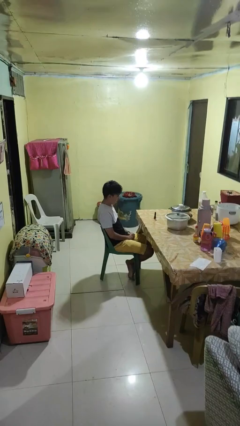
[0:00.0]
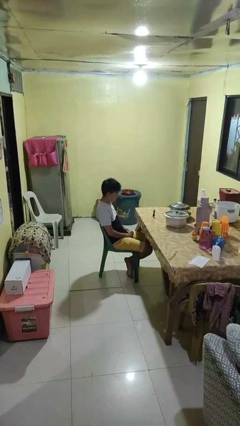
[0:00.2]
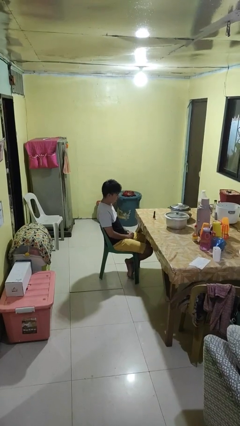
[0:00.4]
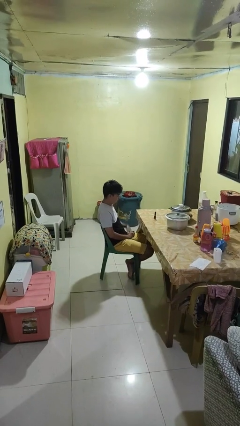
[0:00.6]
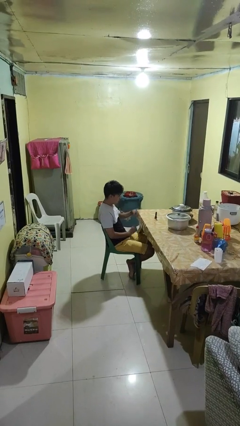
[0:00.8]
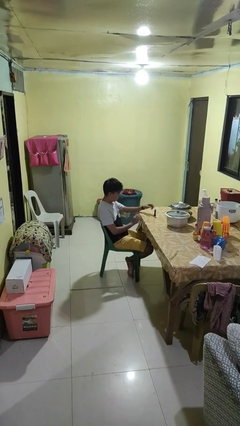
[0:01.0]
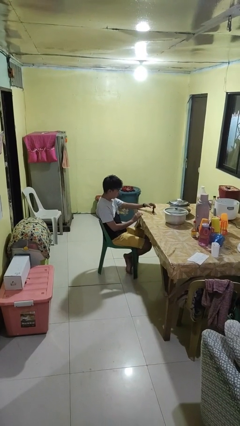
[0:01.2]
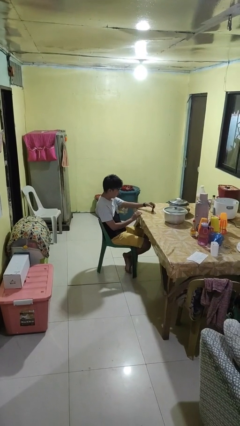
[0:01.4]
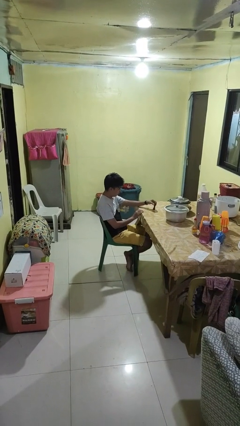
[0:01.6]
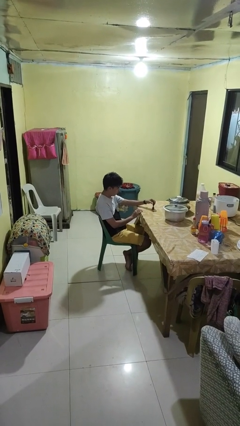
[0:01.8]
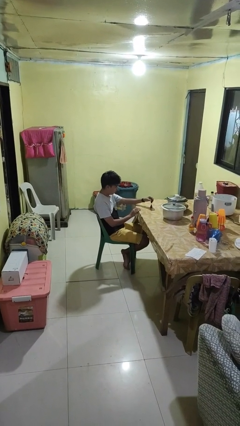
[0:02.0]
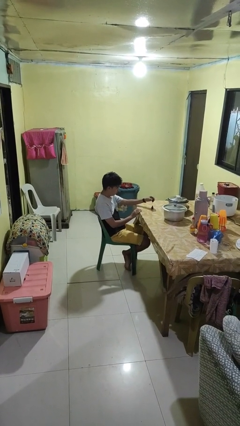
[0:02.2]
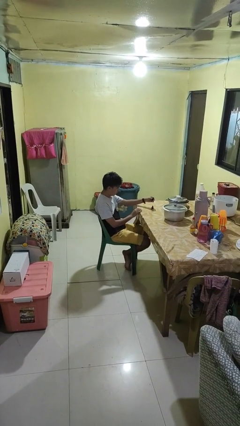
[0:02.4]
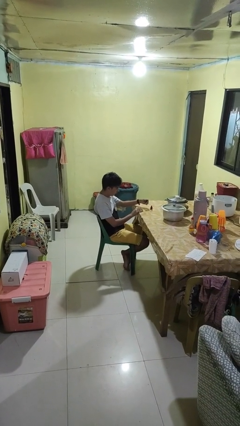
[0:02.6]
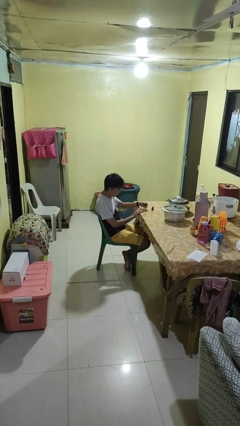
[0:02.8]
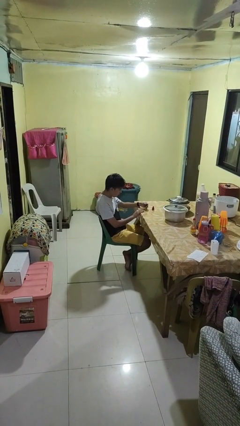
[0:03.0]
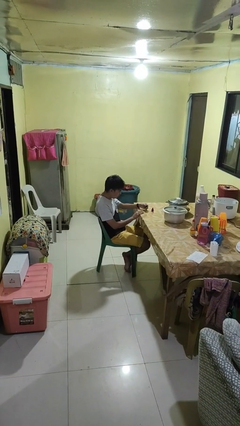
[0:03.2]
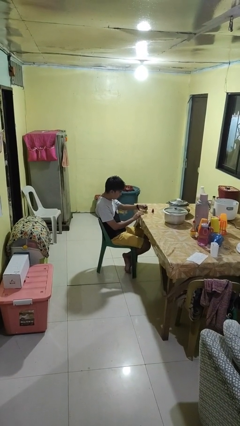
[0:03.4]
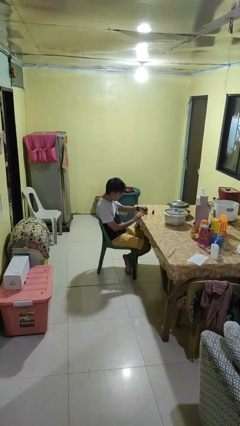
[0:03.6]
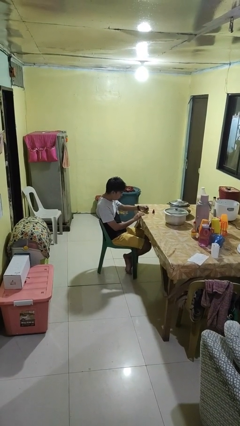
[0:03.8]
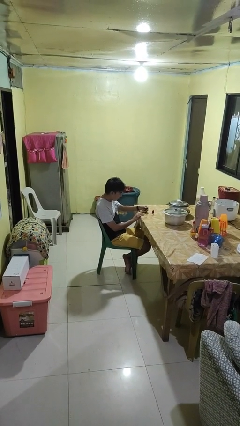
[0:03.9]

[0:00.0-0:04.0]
person paints fingernails

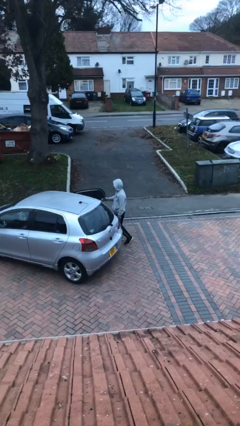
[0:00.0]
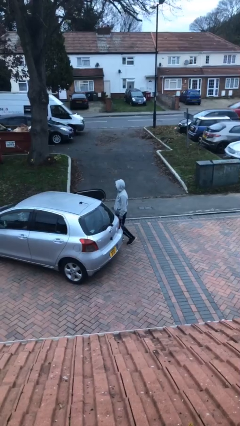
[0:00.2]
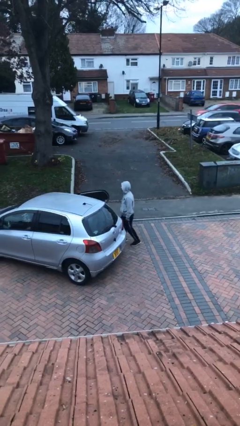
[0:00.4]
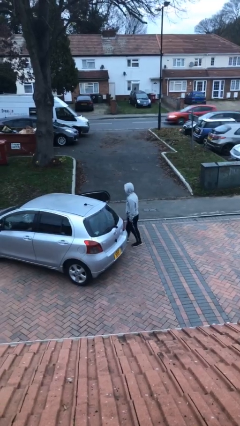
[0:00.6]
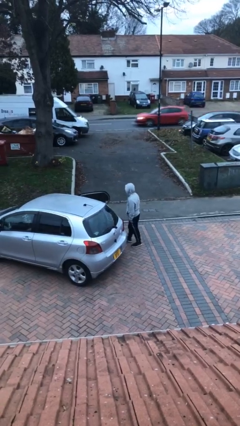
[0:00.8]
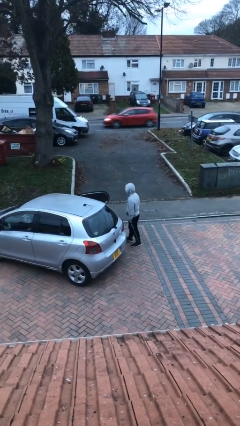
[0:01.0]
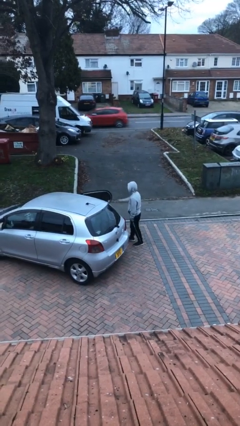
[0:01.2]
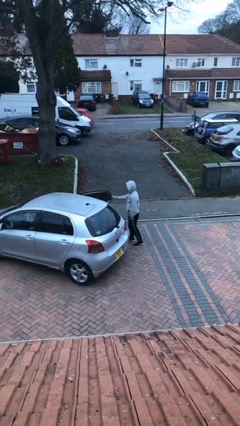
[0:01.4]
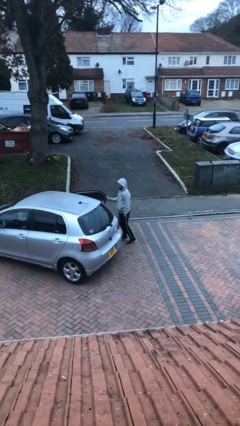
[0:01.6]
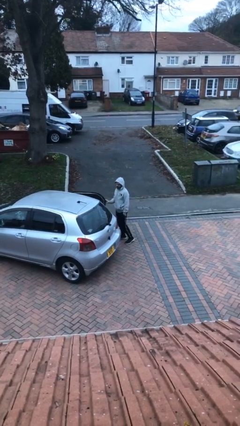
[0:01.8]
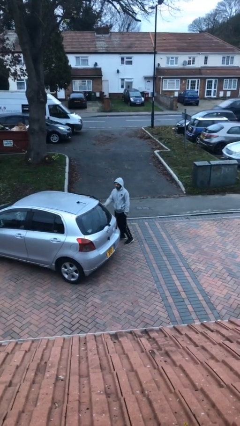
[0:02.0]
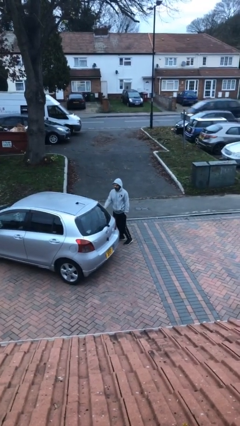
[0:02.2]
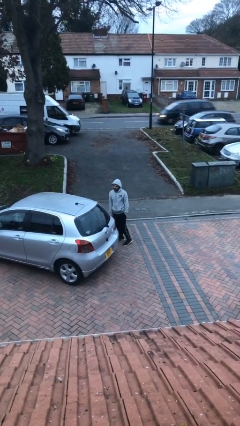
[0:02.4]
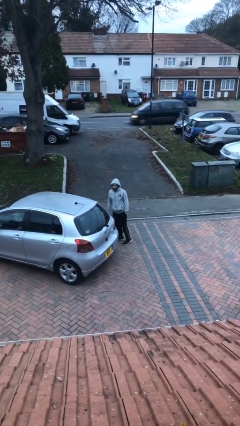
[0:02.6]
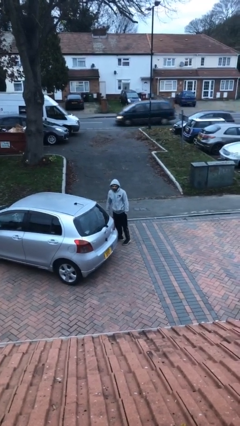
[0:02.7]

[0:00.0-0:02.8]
person closes car door

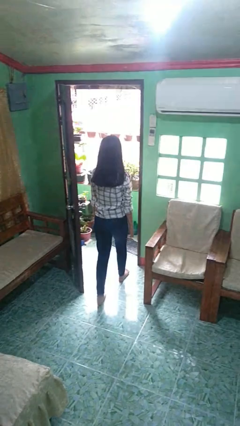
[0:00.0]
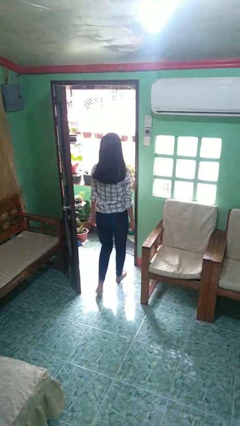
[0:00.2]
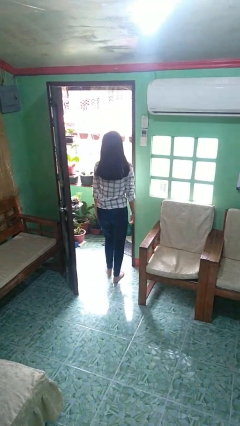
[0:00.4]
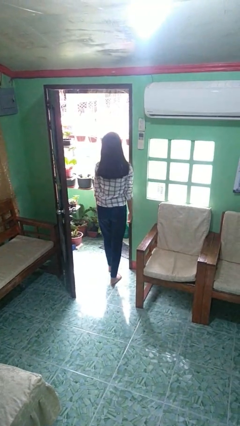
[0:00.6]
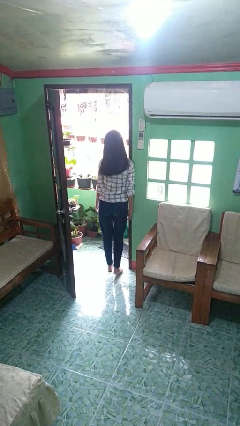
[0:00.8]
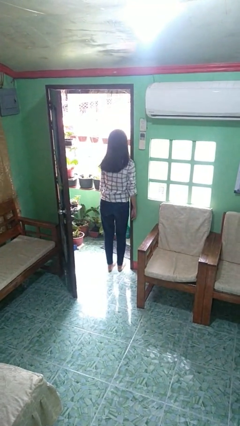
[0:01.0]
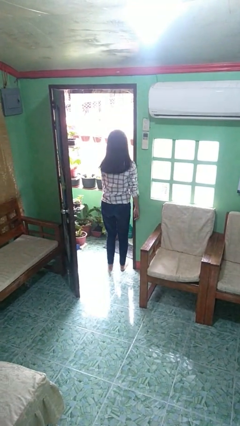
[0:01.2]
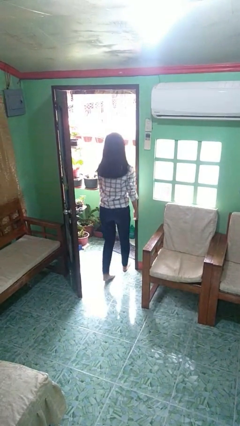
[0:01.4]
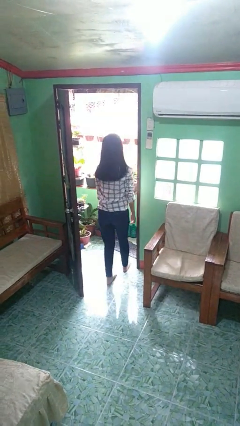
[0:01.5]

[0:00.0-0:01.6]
person bumps into wall

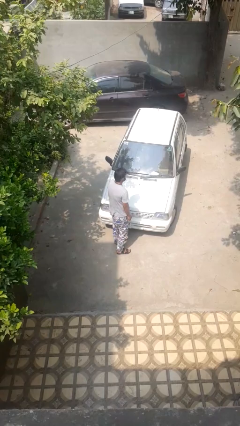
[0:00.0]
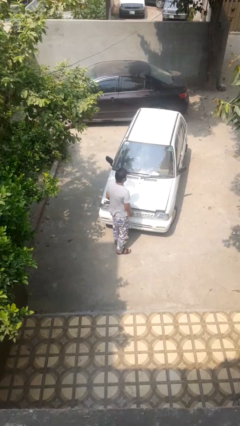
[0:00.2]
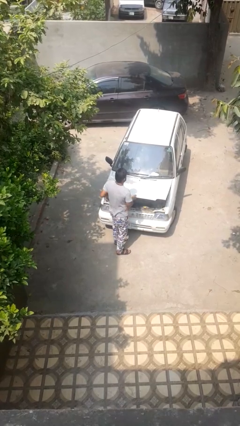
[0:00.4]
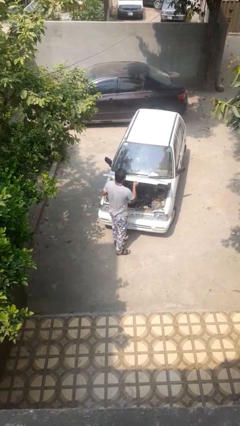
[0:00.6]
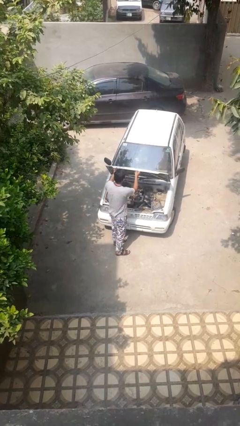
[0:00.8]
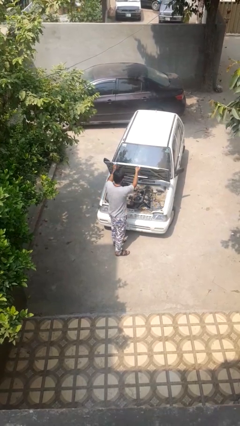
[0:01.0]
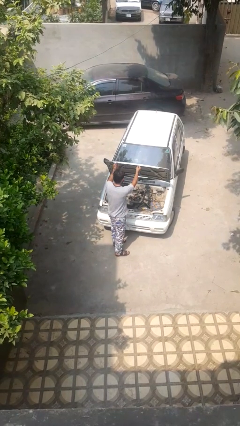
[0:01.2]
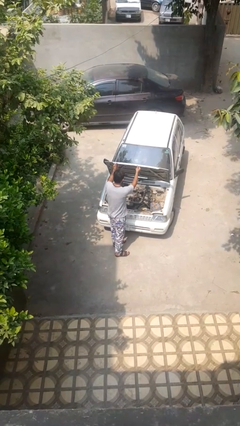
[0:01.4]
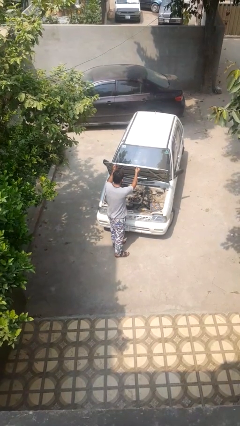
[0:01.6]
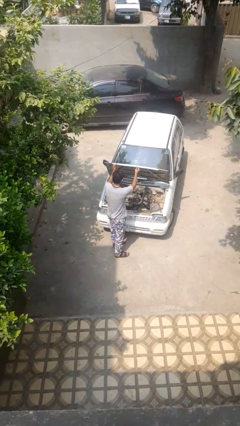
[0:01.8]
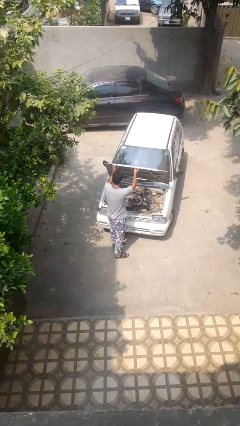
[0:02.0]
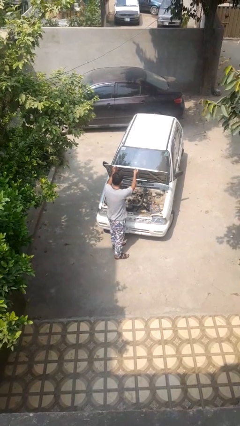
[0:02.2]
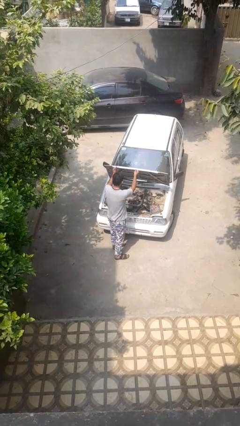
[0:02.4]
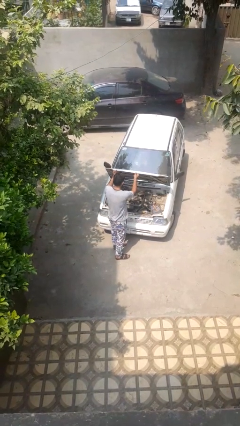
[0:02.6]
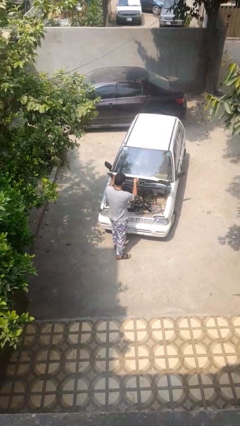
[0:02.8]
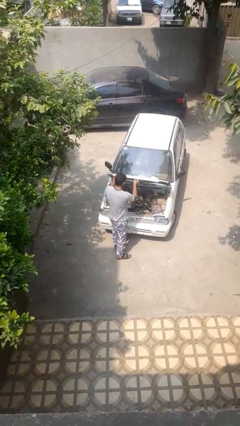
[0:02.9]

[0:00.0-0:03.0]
person opens car hood

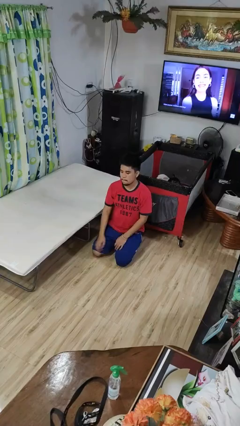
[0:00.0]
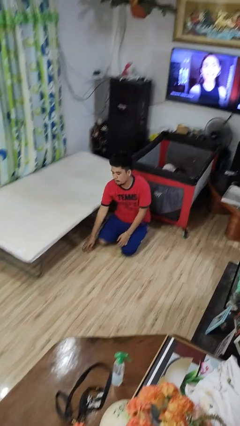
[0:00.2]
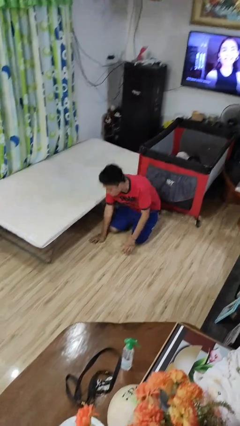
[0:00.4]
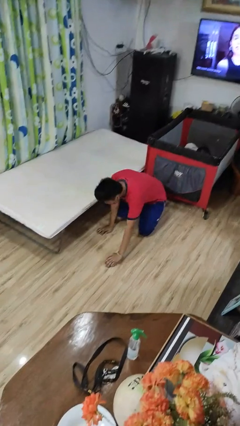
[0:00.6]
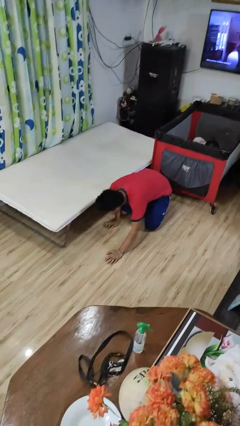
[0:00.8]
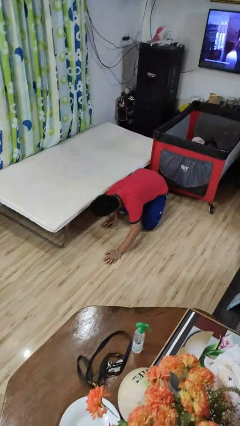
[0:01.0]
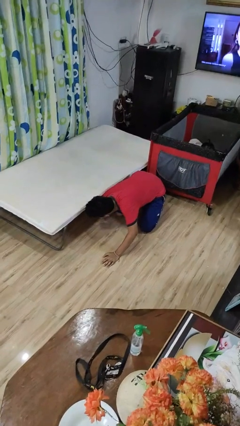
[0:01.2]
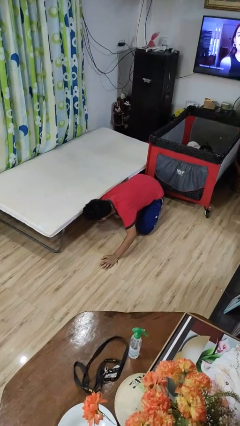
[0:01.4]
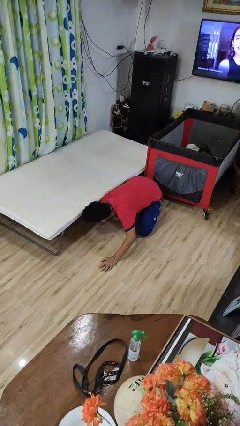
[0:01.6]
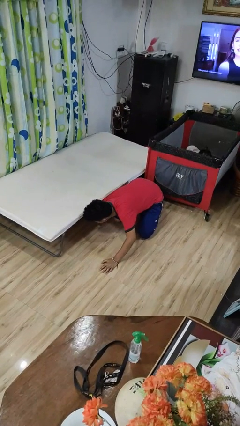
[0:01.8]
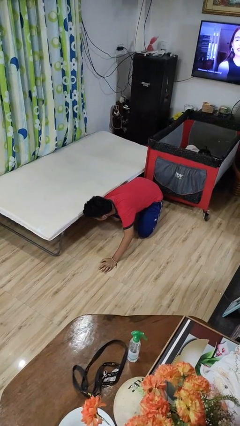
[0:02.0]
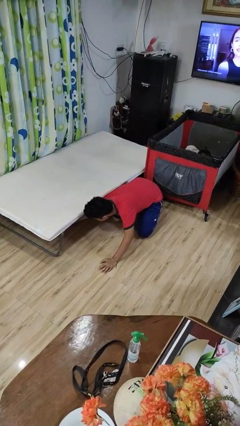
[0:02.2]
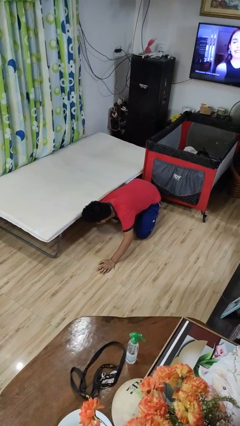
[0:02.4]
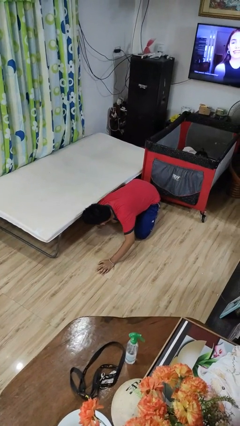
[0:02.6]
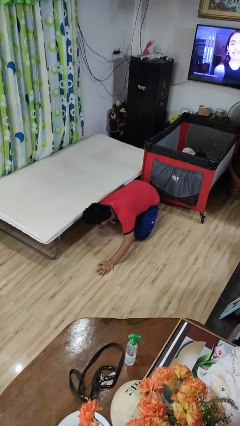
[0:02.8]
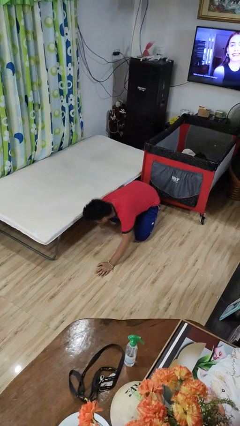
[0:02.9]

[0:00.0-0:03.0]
person searches under bed

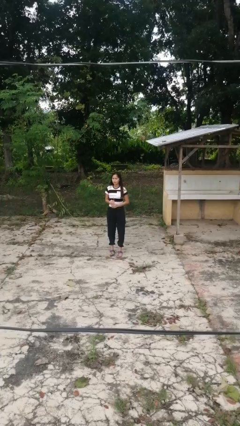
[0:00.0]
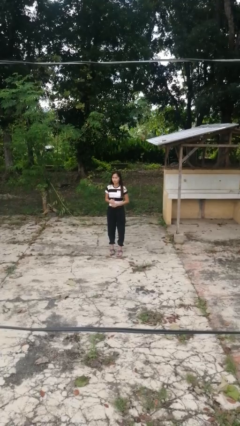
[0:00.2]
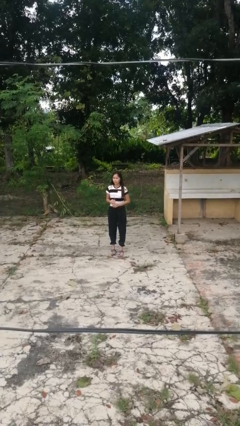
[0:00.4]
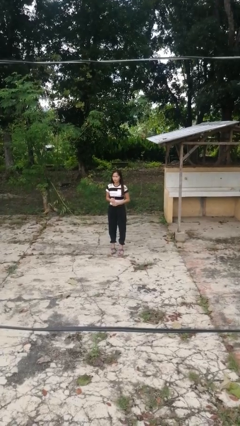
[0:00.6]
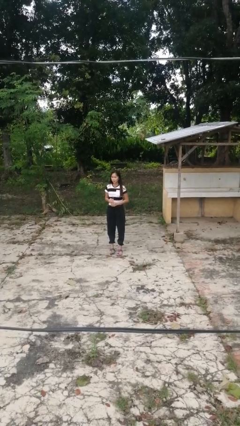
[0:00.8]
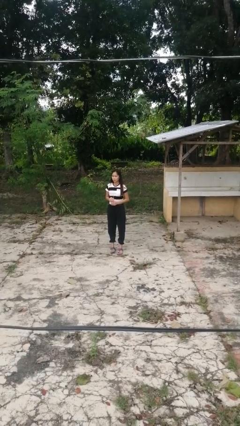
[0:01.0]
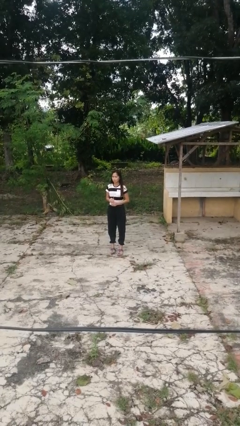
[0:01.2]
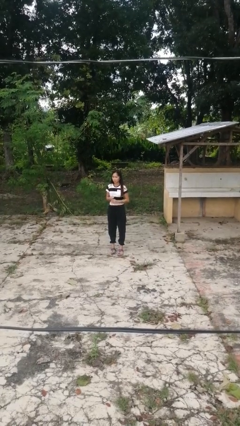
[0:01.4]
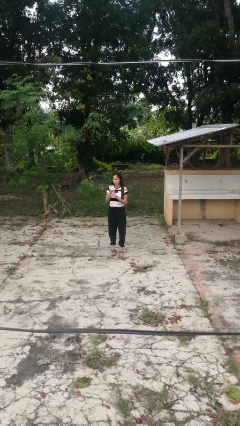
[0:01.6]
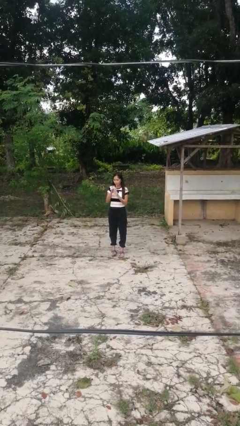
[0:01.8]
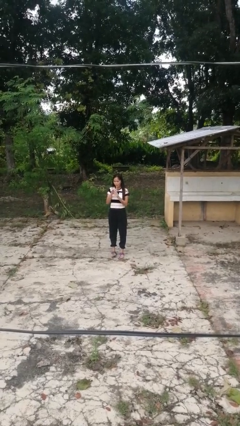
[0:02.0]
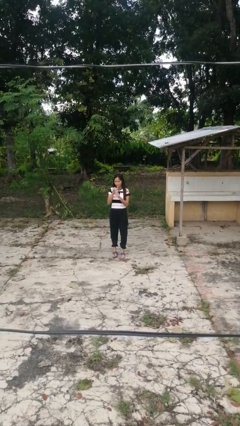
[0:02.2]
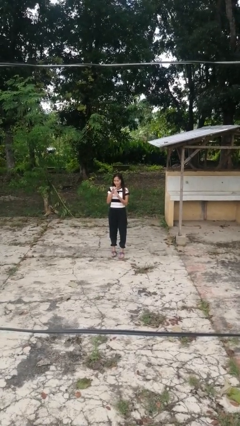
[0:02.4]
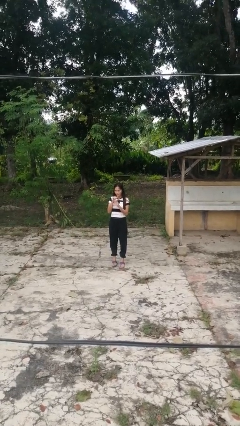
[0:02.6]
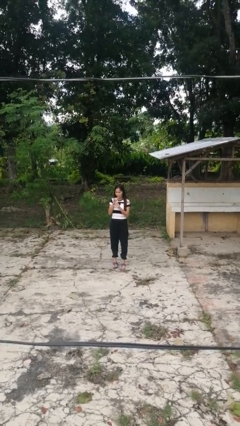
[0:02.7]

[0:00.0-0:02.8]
person drinks from straw

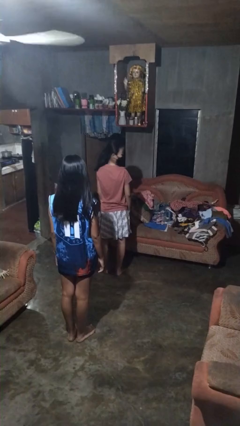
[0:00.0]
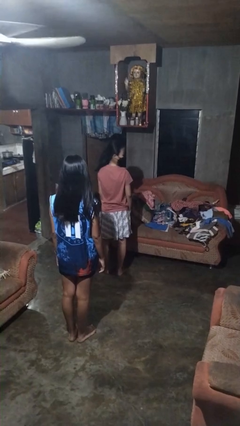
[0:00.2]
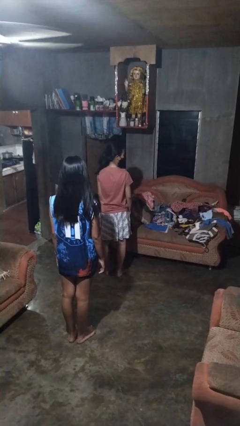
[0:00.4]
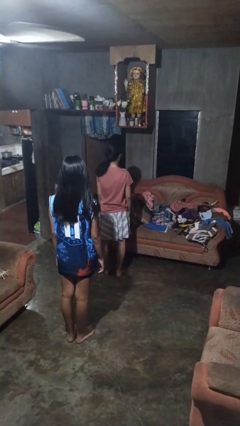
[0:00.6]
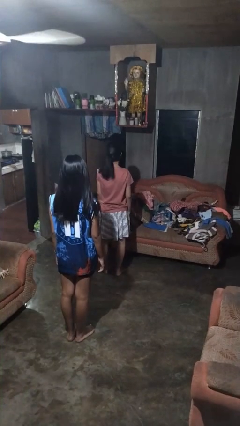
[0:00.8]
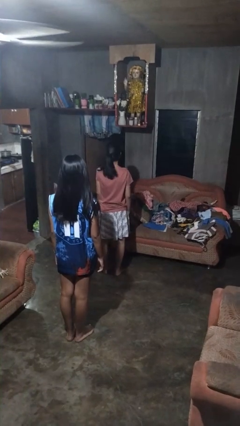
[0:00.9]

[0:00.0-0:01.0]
person looks over shoulder
